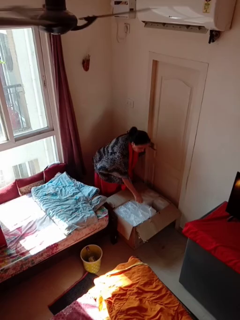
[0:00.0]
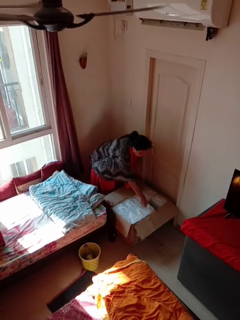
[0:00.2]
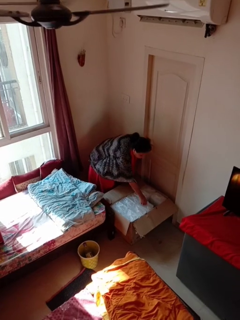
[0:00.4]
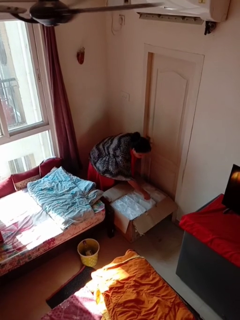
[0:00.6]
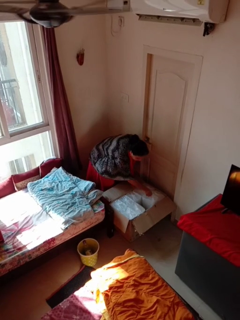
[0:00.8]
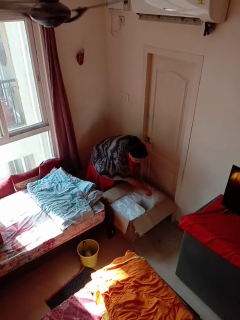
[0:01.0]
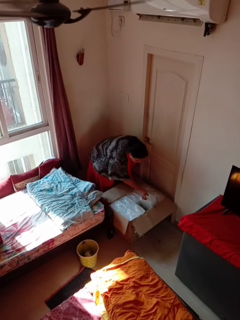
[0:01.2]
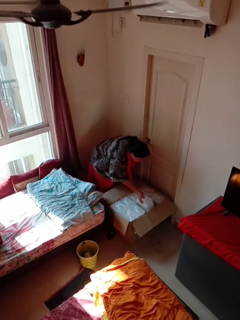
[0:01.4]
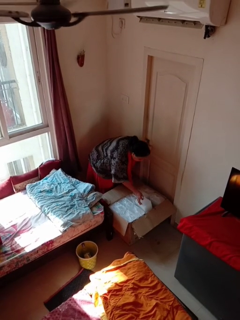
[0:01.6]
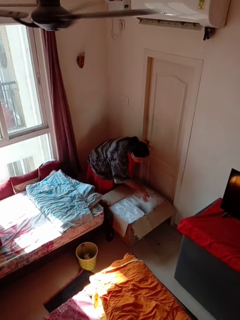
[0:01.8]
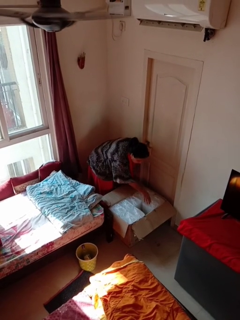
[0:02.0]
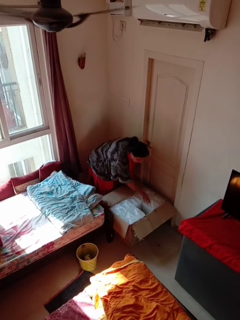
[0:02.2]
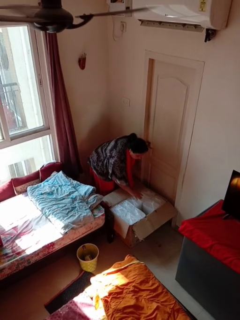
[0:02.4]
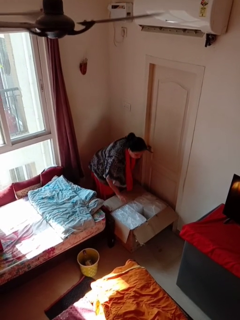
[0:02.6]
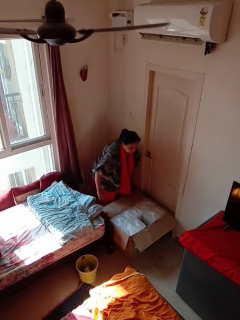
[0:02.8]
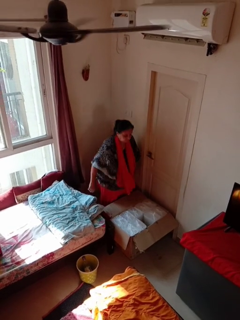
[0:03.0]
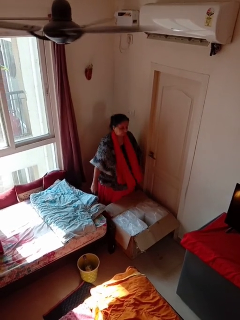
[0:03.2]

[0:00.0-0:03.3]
person searches in box

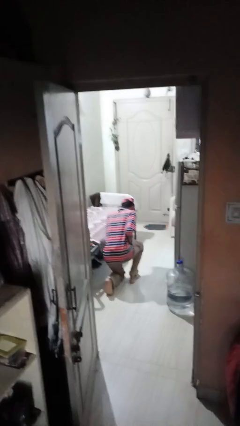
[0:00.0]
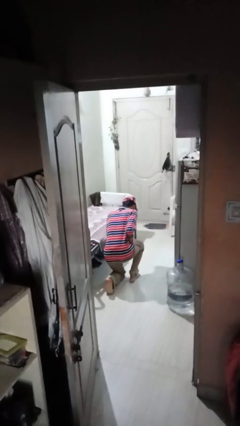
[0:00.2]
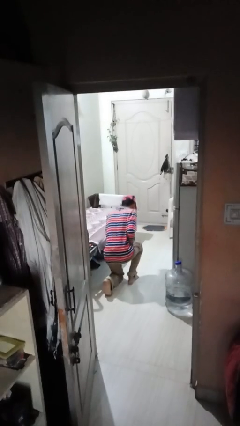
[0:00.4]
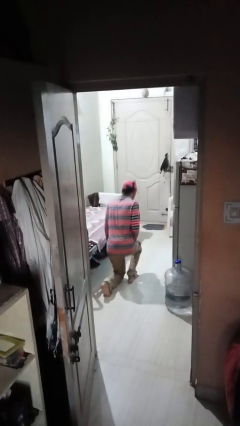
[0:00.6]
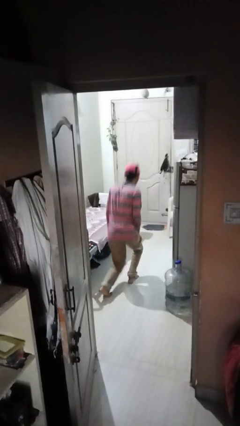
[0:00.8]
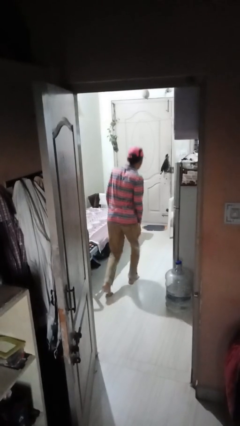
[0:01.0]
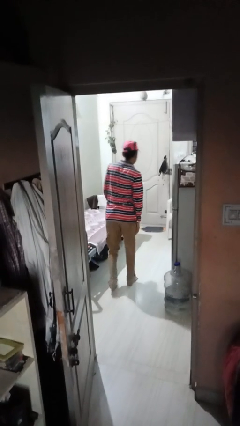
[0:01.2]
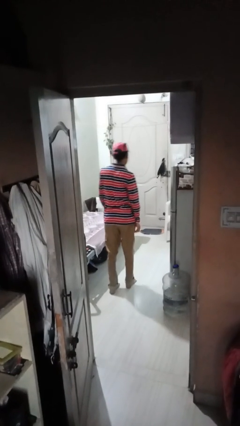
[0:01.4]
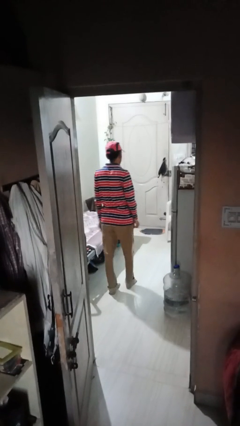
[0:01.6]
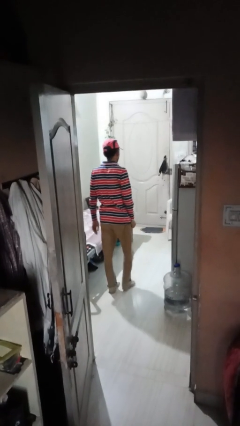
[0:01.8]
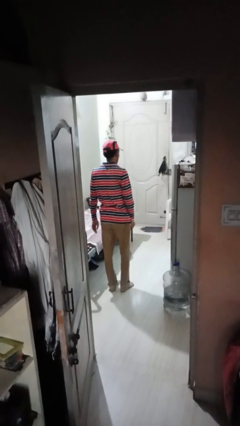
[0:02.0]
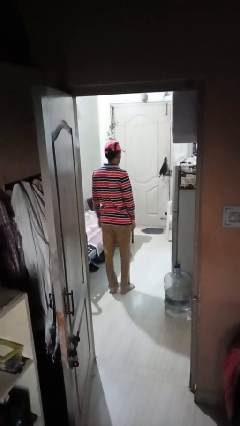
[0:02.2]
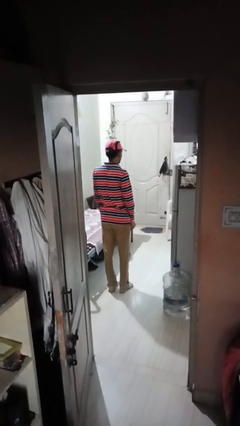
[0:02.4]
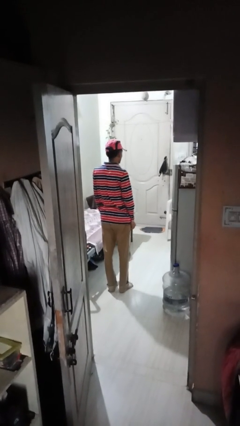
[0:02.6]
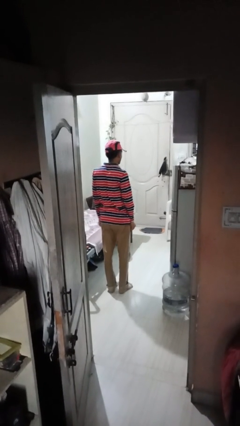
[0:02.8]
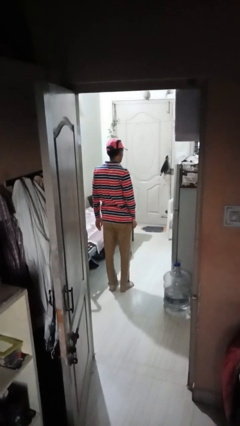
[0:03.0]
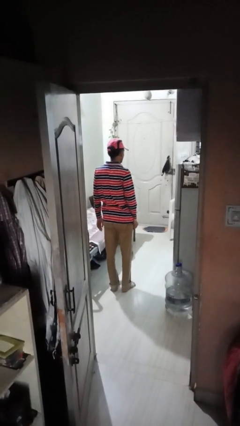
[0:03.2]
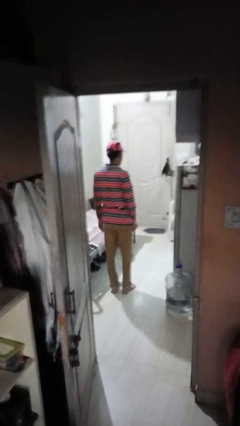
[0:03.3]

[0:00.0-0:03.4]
person stands up from floor

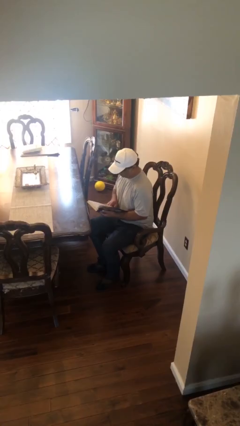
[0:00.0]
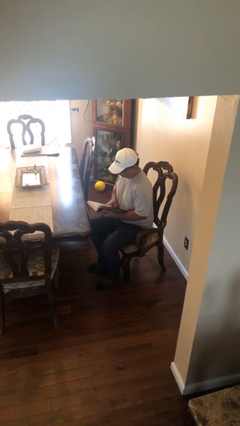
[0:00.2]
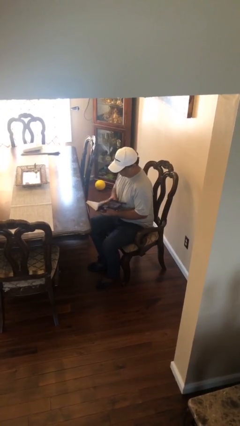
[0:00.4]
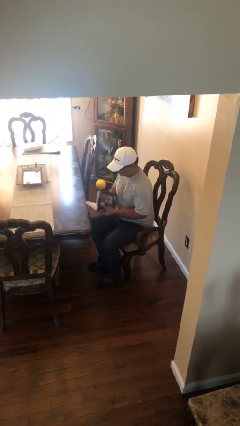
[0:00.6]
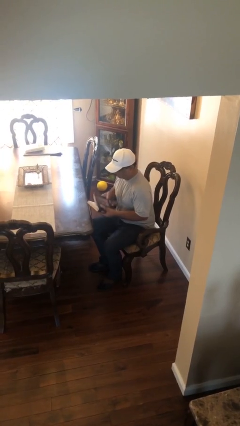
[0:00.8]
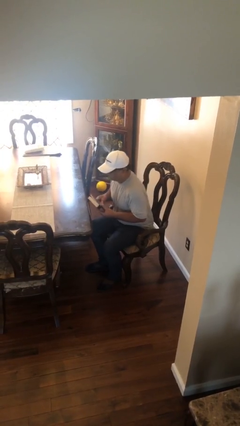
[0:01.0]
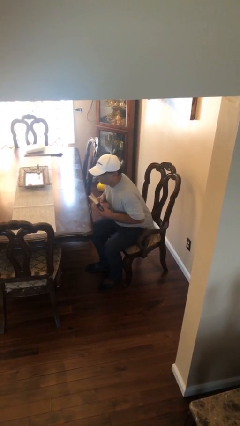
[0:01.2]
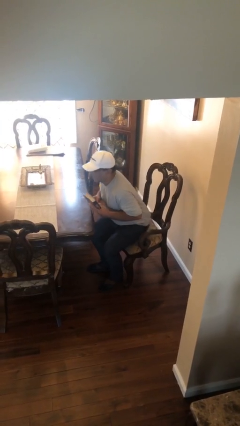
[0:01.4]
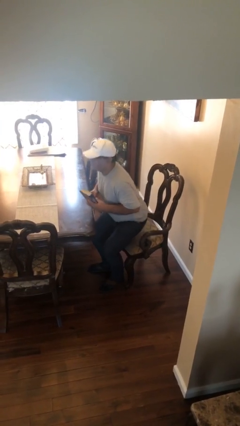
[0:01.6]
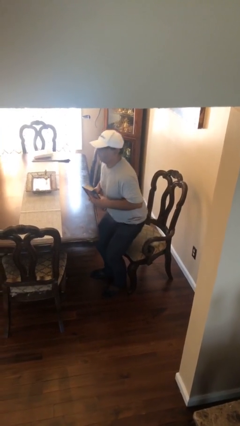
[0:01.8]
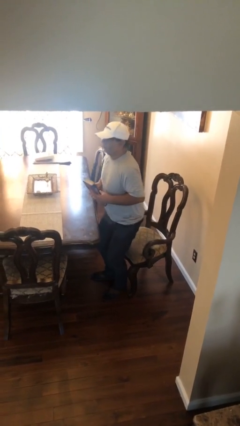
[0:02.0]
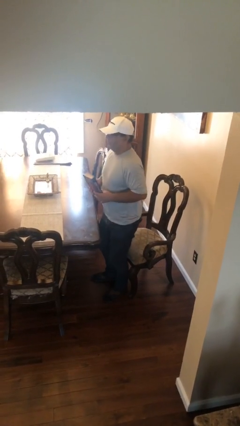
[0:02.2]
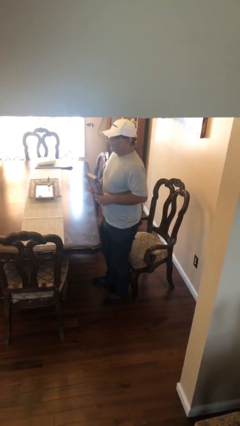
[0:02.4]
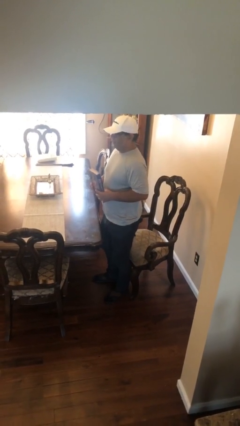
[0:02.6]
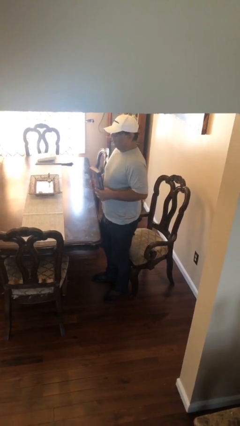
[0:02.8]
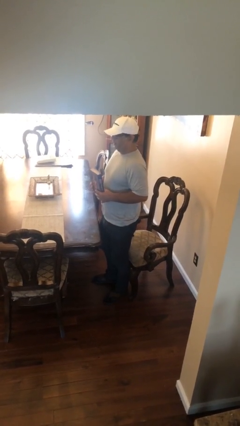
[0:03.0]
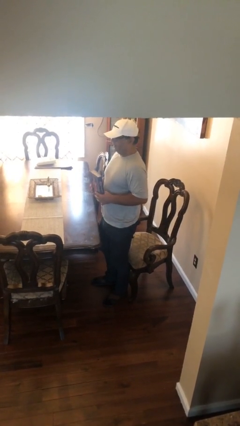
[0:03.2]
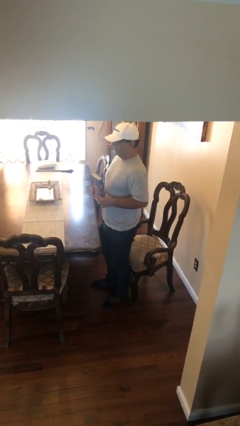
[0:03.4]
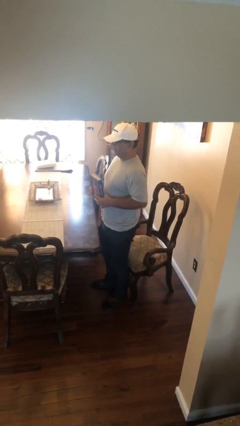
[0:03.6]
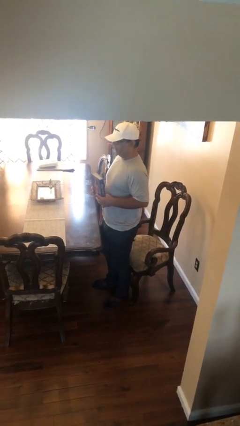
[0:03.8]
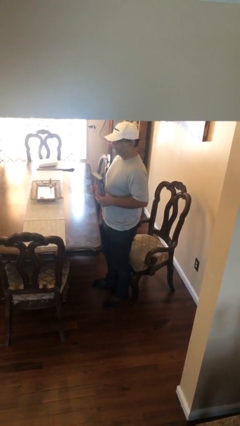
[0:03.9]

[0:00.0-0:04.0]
person stands up

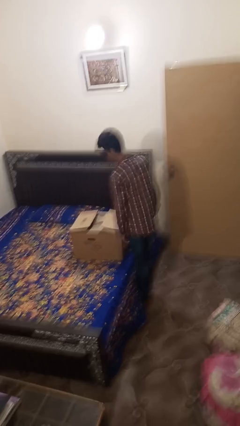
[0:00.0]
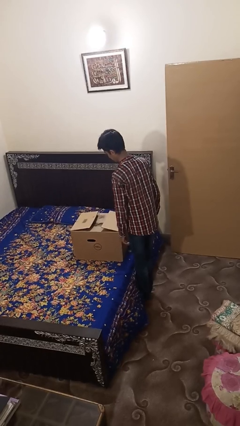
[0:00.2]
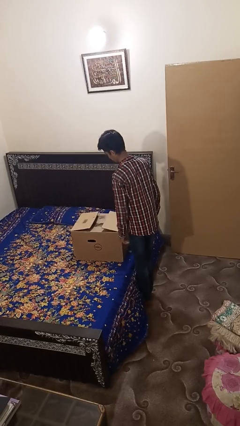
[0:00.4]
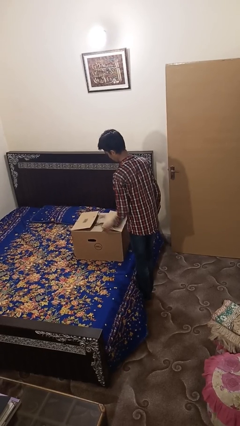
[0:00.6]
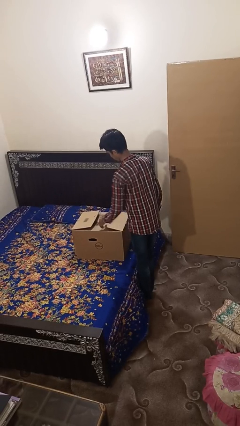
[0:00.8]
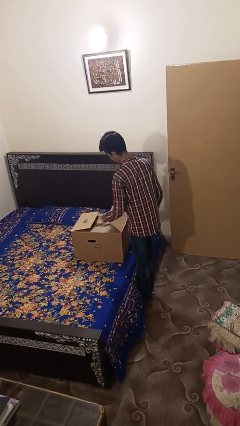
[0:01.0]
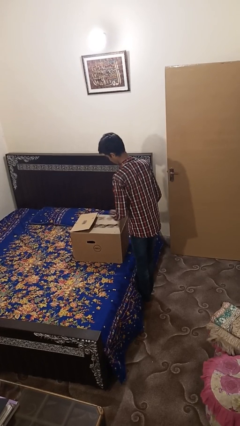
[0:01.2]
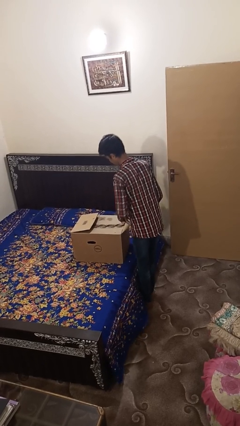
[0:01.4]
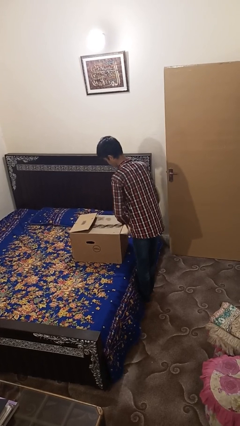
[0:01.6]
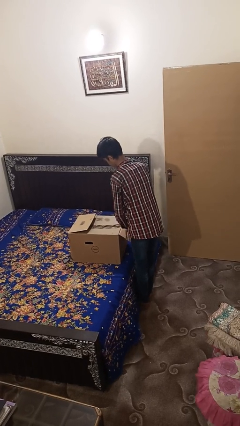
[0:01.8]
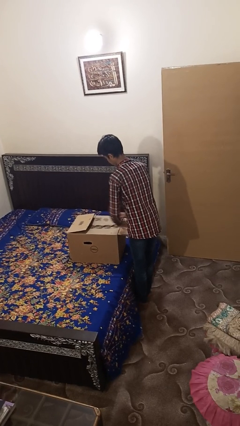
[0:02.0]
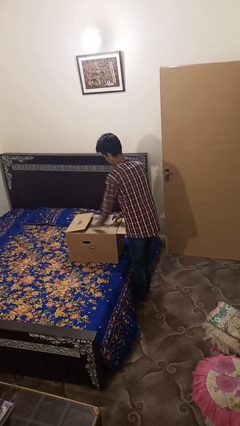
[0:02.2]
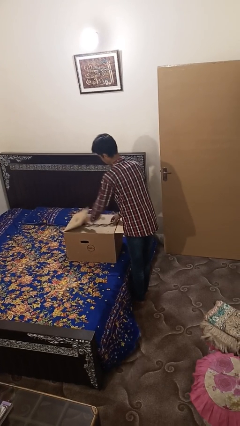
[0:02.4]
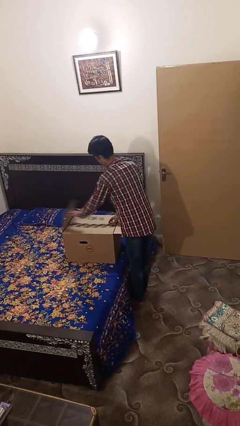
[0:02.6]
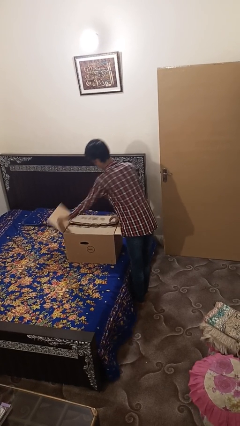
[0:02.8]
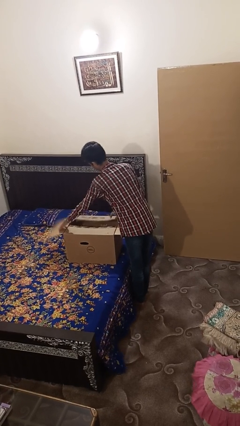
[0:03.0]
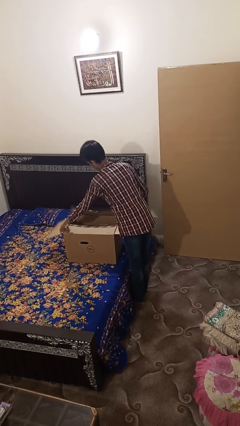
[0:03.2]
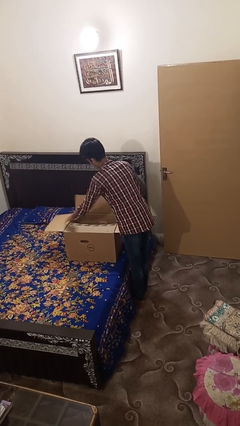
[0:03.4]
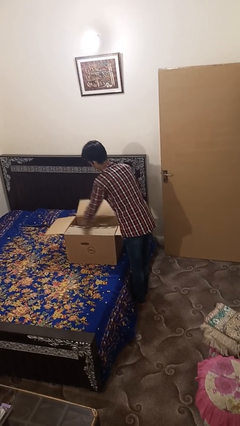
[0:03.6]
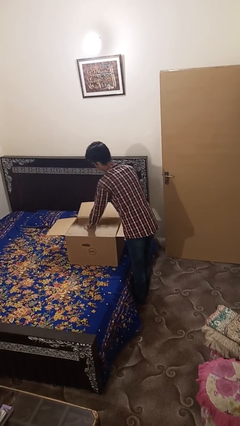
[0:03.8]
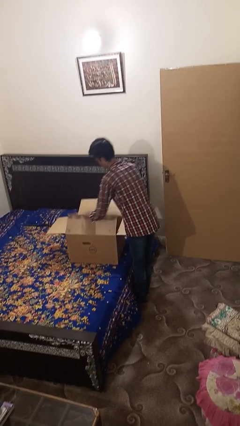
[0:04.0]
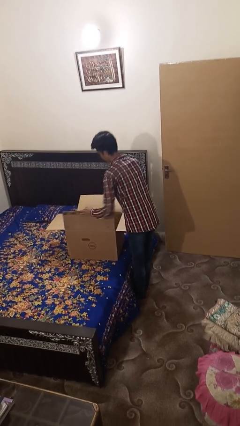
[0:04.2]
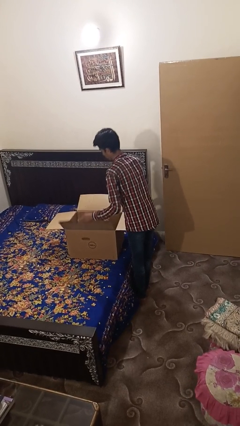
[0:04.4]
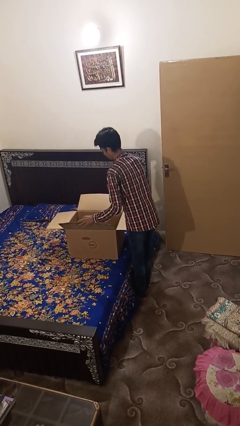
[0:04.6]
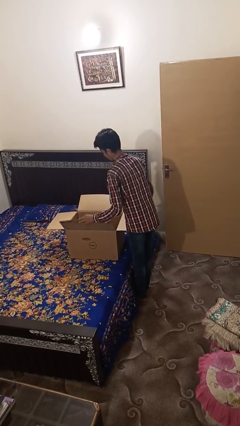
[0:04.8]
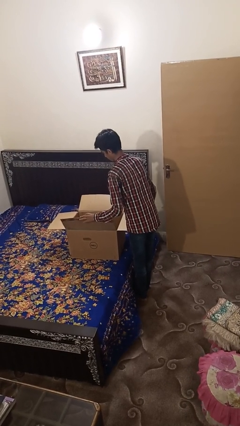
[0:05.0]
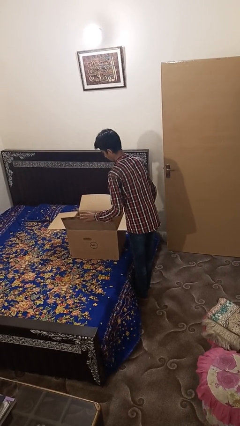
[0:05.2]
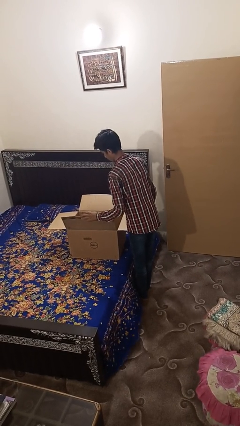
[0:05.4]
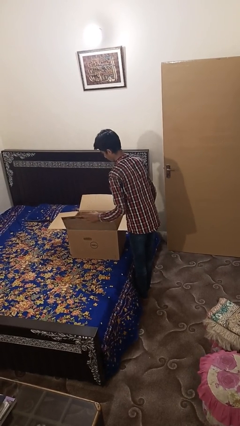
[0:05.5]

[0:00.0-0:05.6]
person opens box

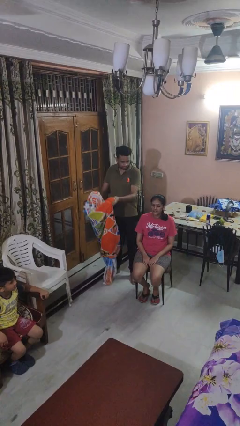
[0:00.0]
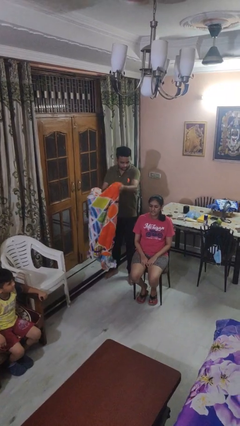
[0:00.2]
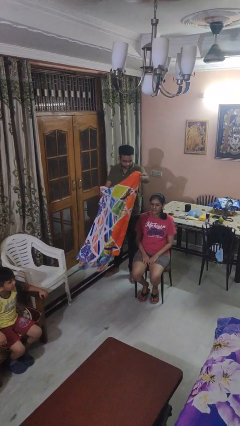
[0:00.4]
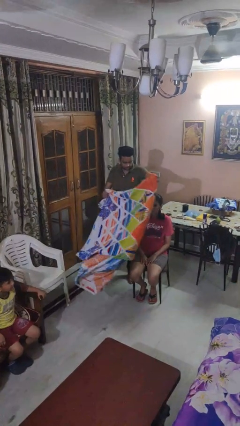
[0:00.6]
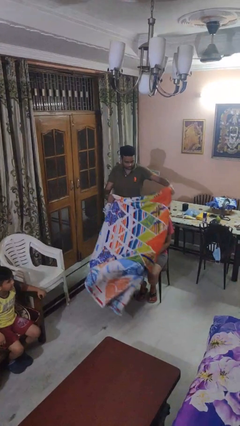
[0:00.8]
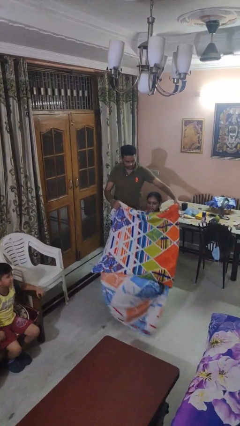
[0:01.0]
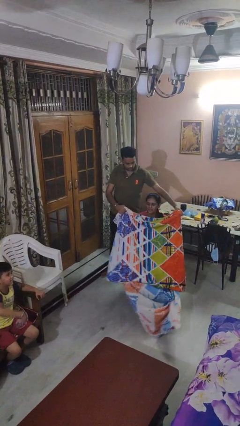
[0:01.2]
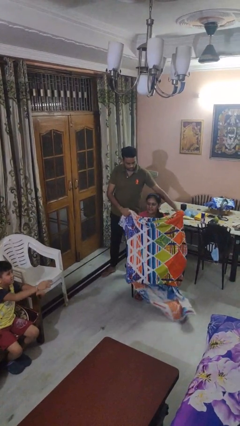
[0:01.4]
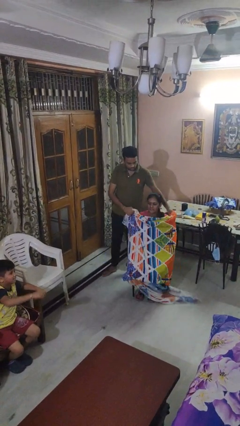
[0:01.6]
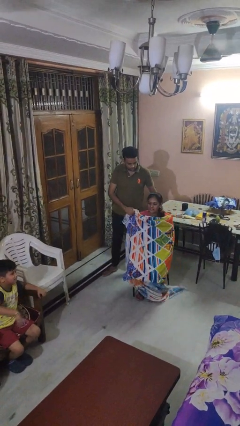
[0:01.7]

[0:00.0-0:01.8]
person covers friend with blanket

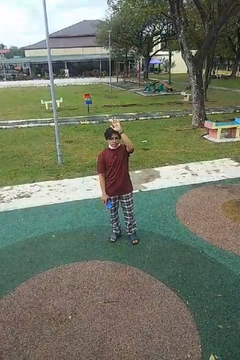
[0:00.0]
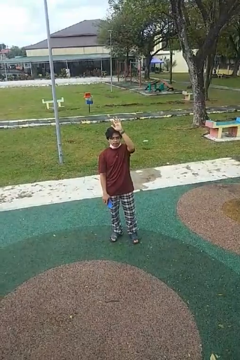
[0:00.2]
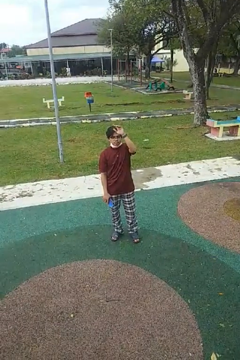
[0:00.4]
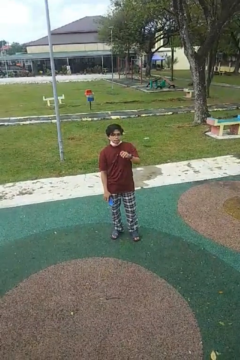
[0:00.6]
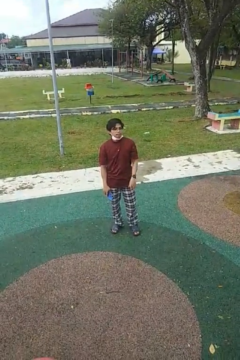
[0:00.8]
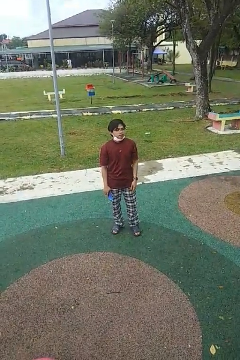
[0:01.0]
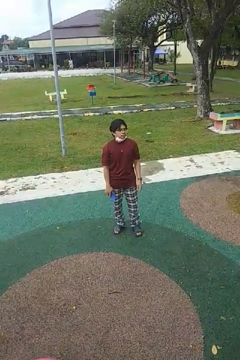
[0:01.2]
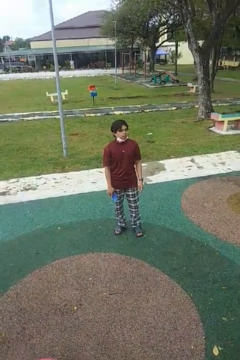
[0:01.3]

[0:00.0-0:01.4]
person gestures lower hand
